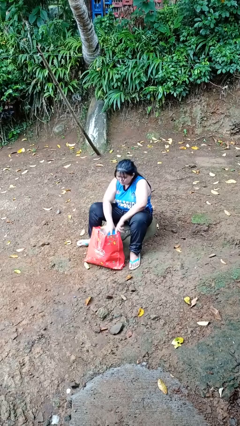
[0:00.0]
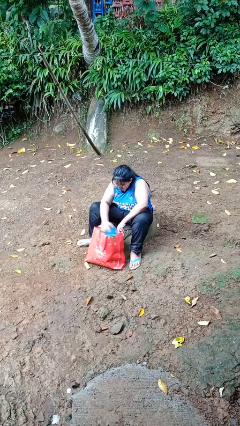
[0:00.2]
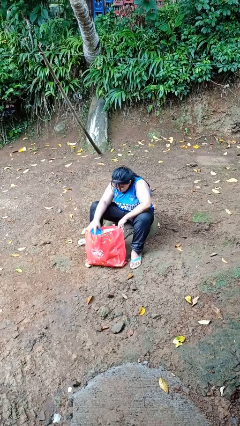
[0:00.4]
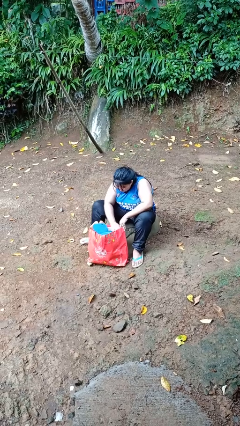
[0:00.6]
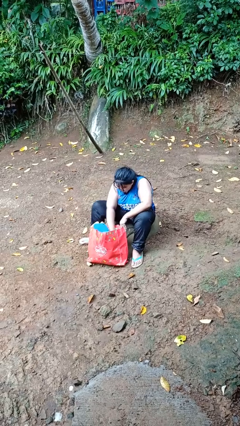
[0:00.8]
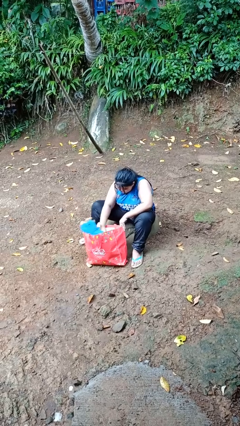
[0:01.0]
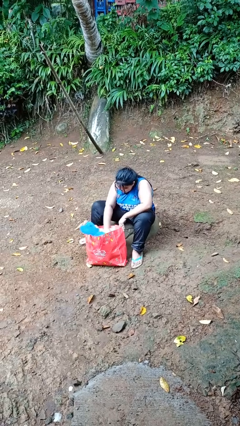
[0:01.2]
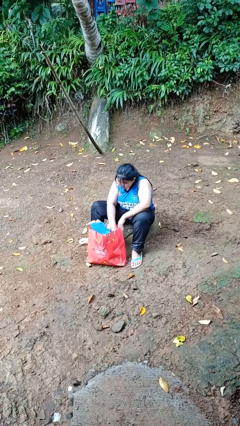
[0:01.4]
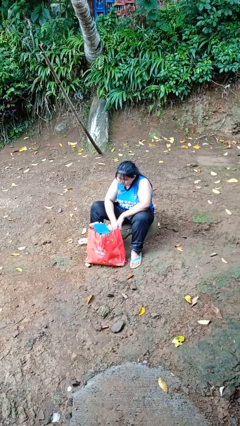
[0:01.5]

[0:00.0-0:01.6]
person searches in bag

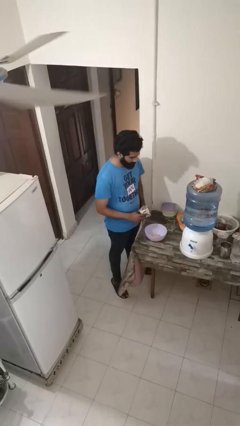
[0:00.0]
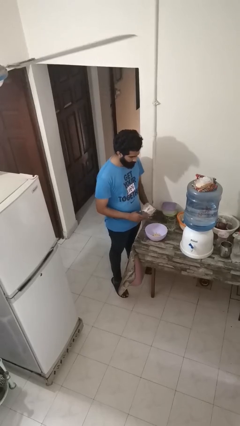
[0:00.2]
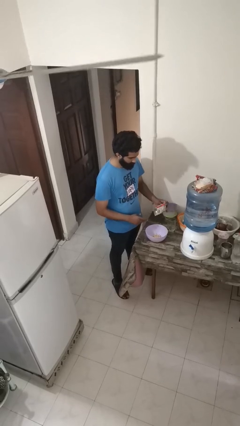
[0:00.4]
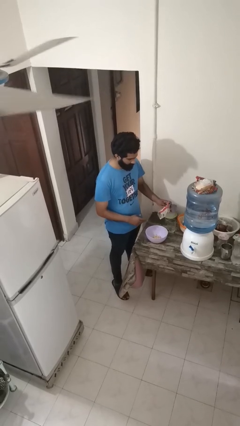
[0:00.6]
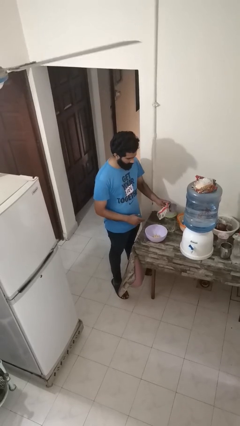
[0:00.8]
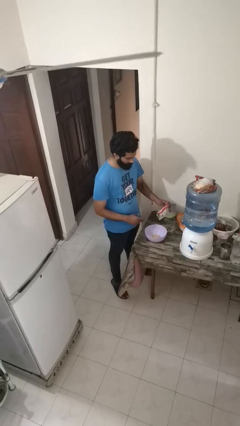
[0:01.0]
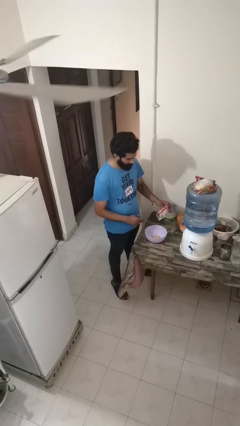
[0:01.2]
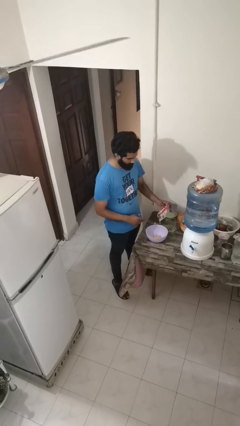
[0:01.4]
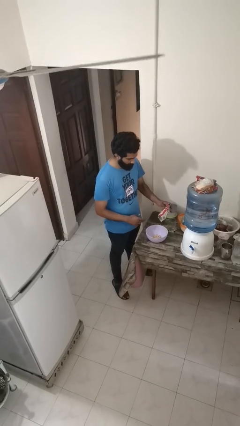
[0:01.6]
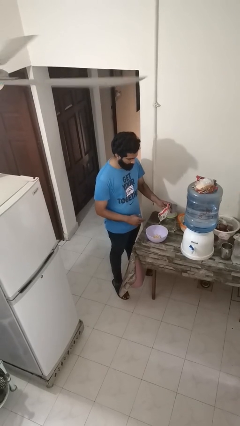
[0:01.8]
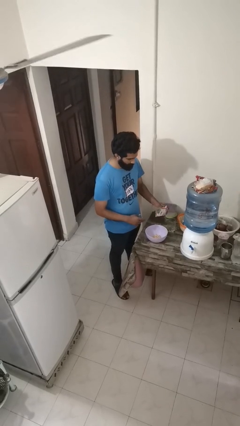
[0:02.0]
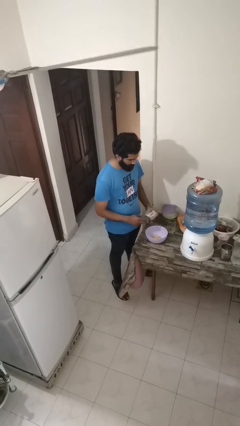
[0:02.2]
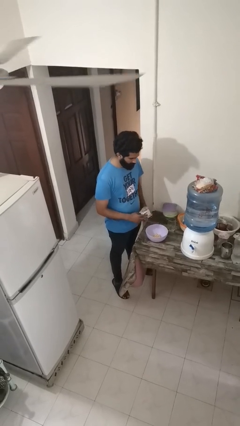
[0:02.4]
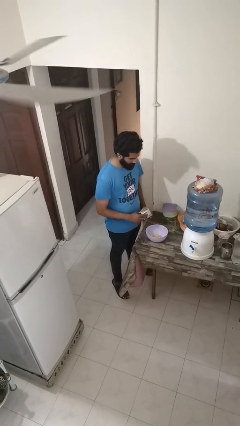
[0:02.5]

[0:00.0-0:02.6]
person pours into bowl

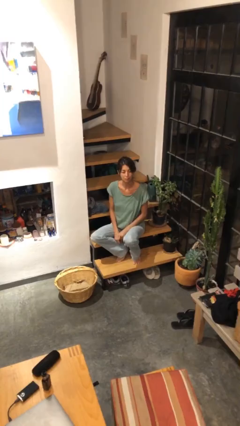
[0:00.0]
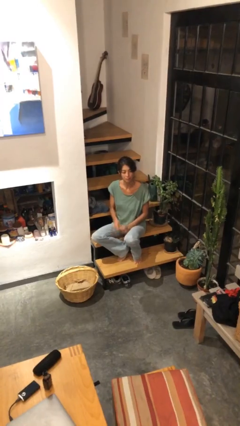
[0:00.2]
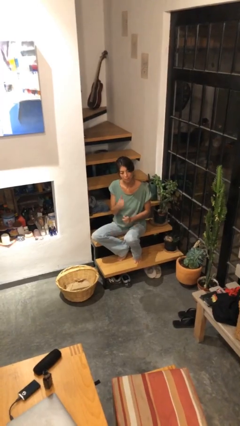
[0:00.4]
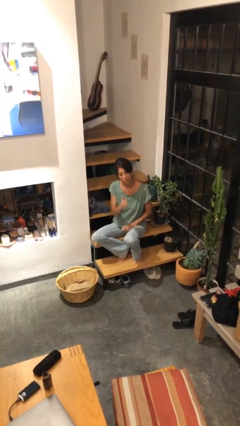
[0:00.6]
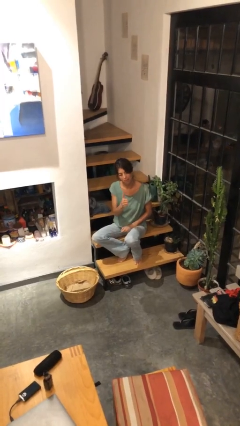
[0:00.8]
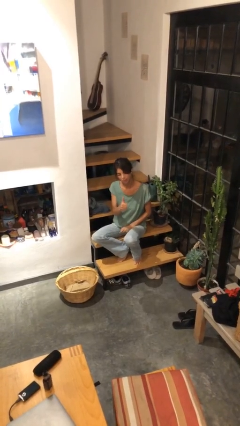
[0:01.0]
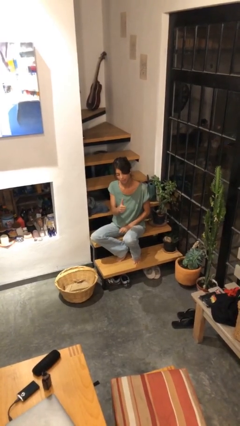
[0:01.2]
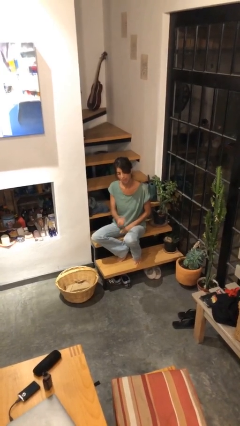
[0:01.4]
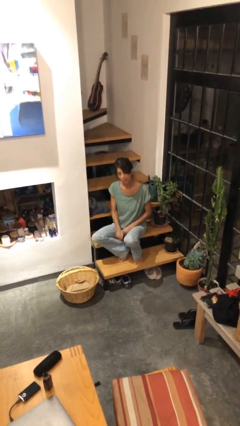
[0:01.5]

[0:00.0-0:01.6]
person gestures thumbs up

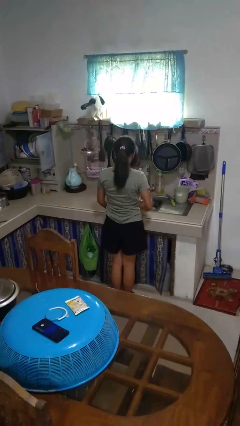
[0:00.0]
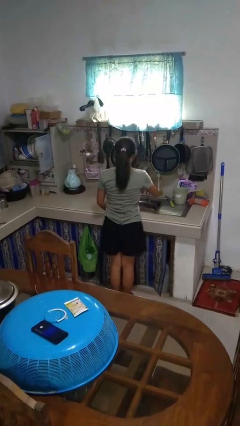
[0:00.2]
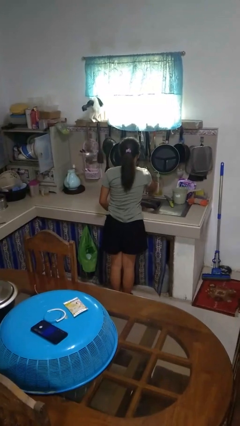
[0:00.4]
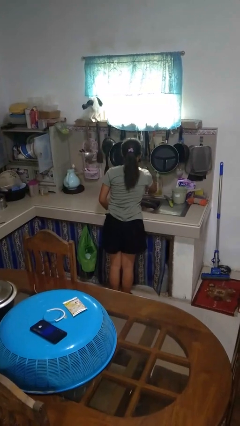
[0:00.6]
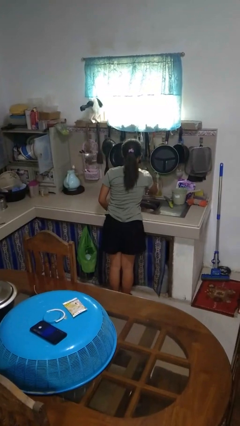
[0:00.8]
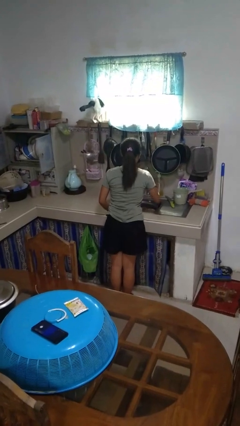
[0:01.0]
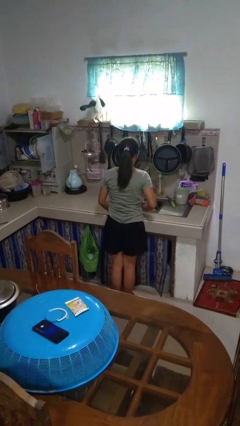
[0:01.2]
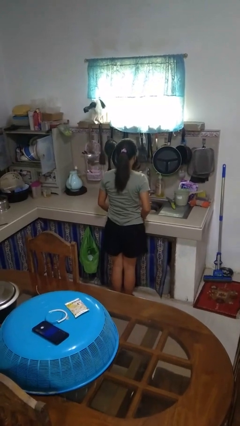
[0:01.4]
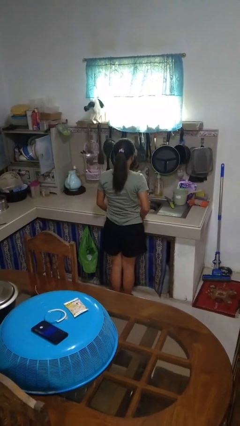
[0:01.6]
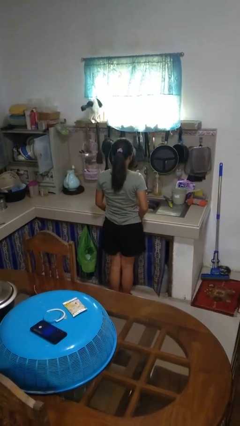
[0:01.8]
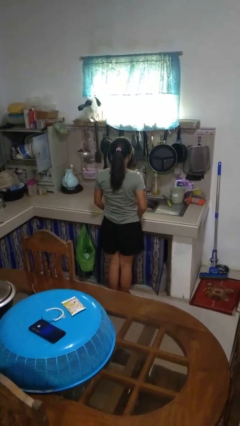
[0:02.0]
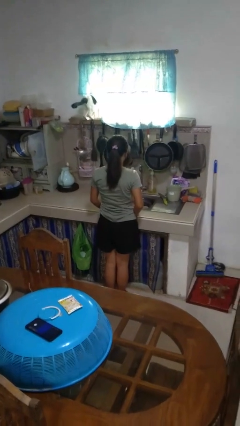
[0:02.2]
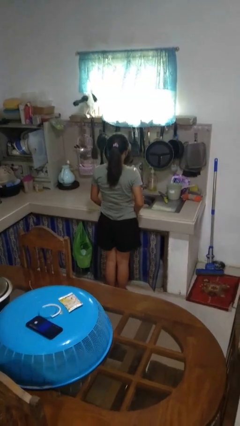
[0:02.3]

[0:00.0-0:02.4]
person turns on faucet

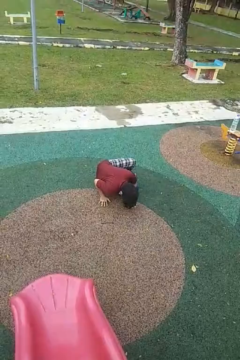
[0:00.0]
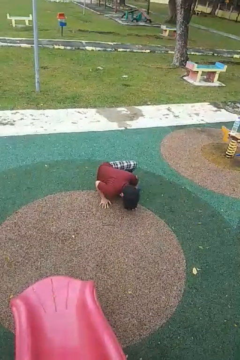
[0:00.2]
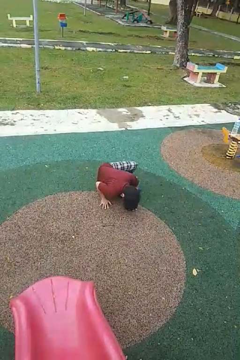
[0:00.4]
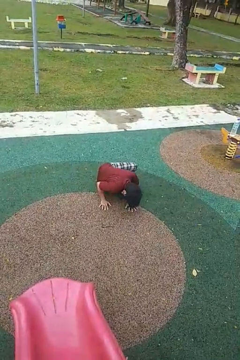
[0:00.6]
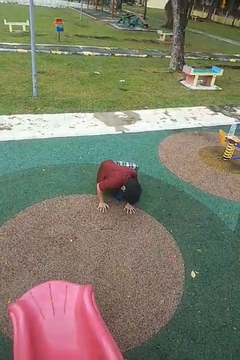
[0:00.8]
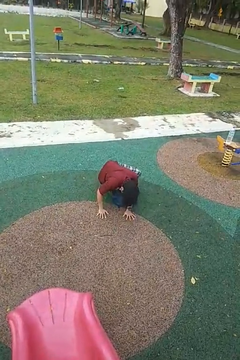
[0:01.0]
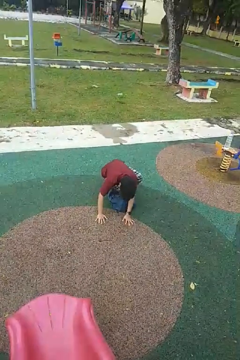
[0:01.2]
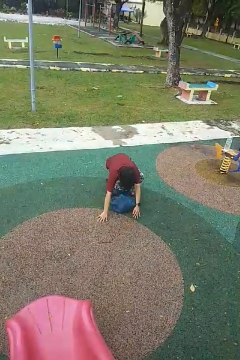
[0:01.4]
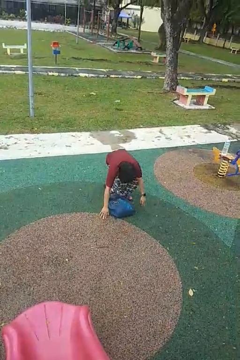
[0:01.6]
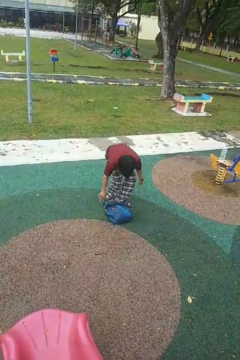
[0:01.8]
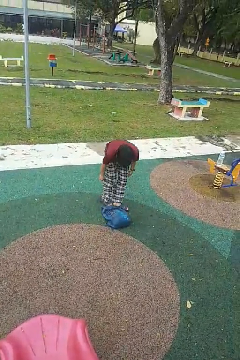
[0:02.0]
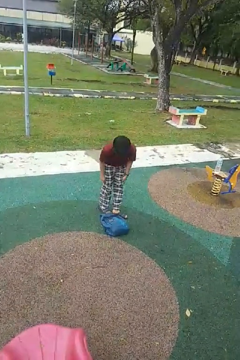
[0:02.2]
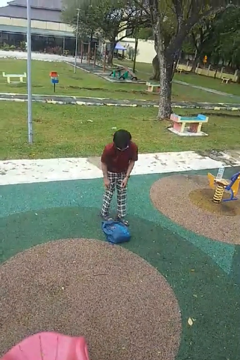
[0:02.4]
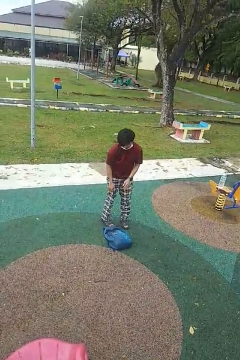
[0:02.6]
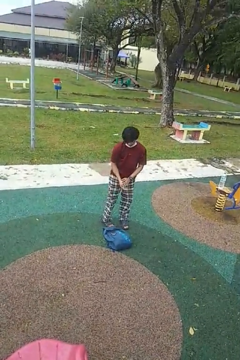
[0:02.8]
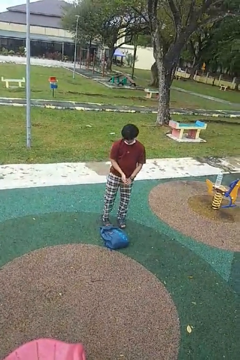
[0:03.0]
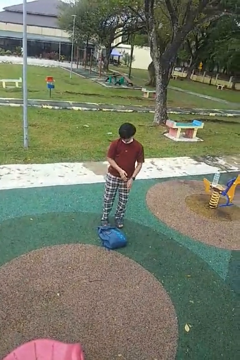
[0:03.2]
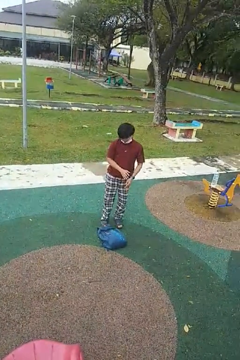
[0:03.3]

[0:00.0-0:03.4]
person stands up from floor

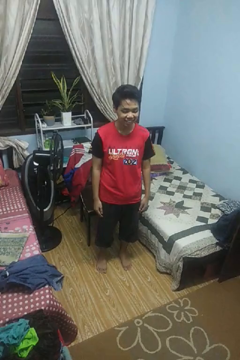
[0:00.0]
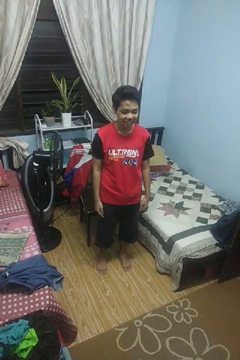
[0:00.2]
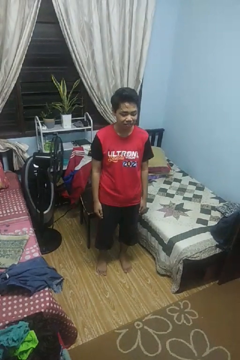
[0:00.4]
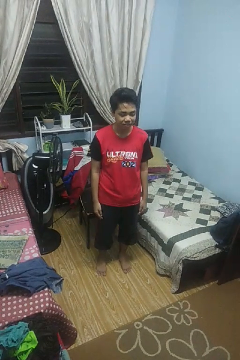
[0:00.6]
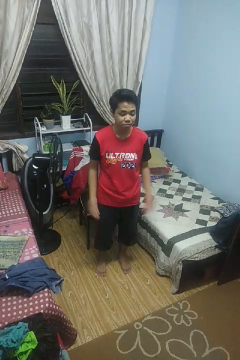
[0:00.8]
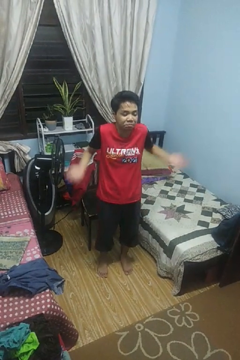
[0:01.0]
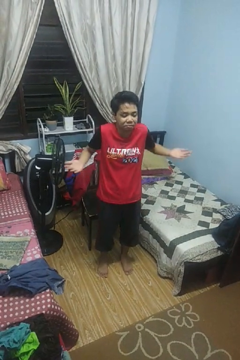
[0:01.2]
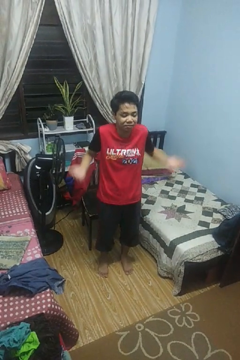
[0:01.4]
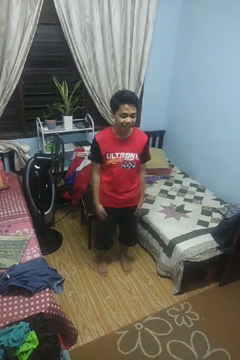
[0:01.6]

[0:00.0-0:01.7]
person shrugs

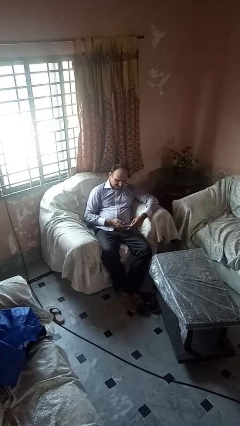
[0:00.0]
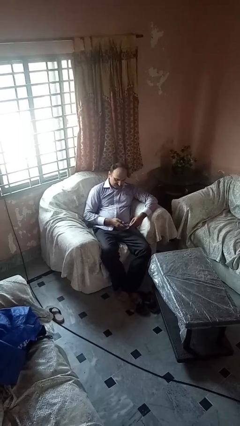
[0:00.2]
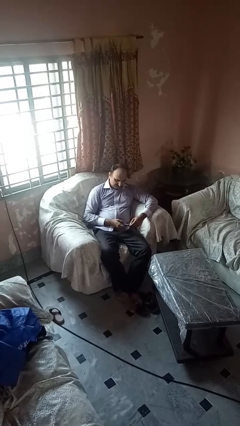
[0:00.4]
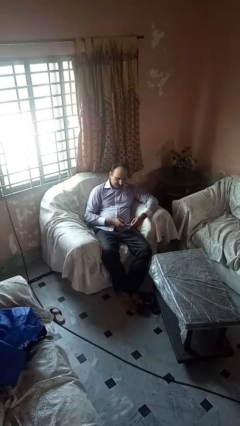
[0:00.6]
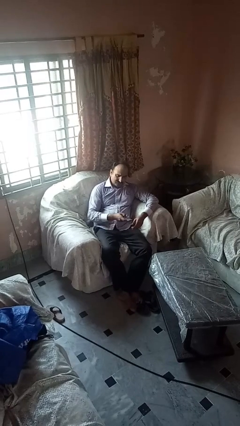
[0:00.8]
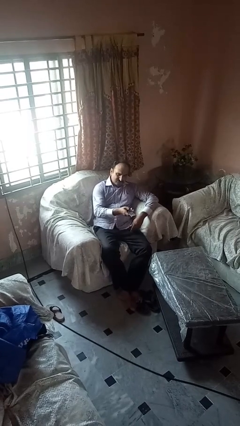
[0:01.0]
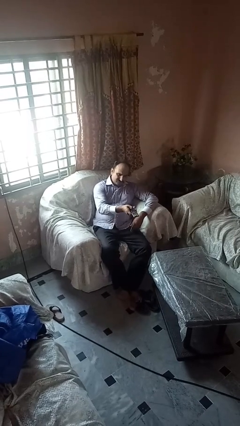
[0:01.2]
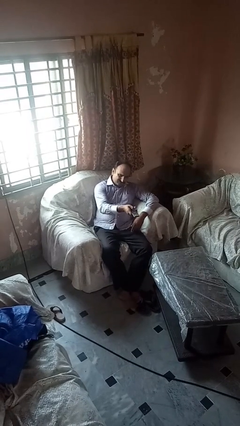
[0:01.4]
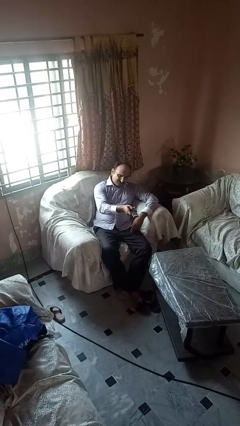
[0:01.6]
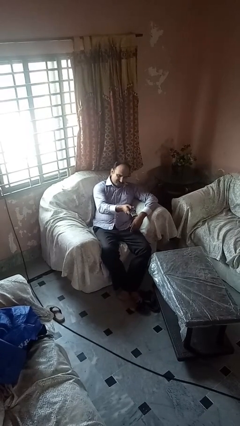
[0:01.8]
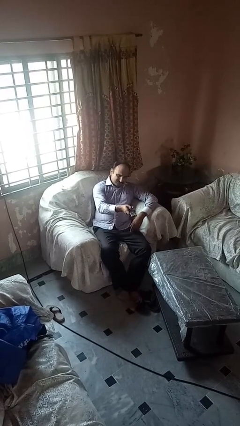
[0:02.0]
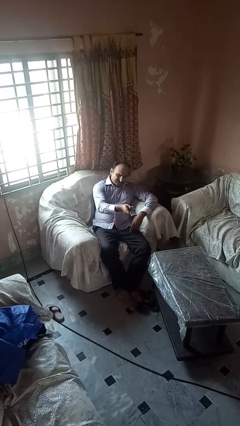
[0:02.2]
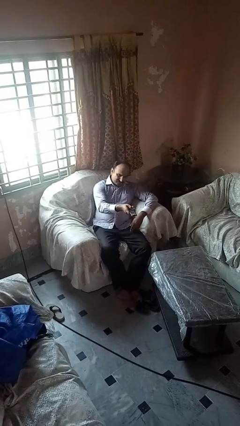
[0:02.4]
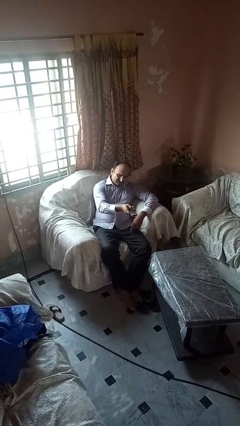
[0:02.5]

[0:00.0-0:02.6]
person uses television remote

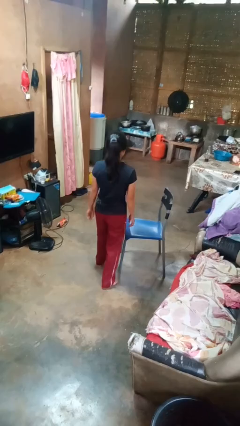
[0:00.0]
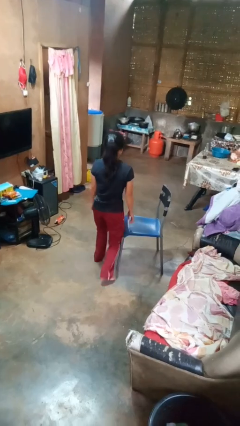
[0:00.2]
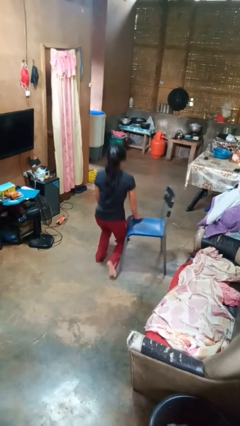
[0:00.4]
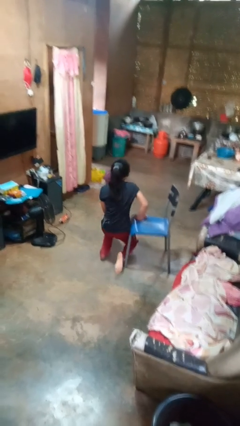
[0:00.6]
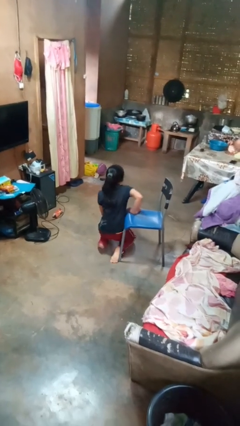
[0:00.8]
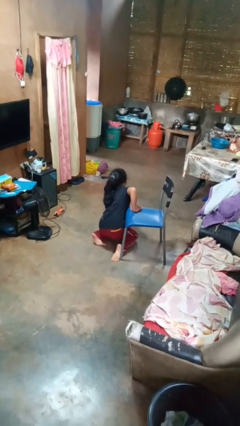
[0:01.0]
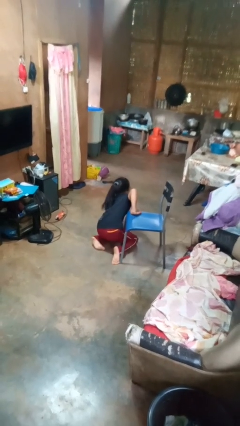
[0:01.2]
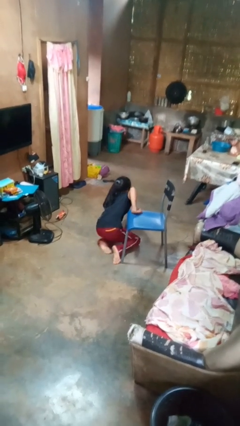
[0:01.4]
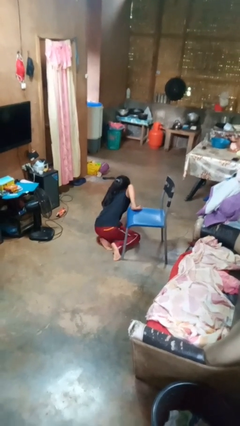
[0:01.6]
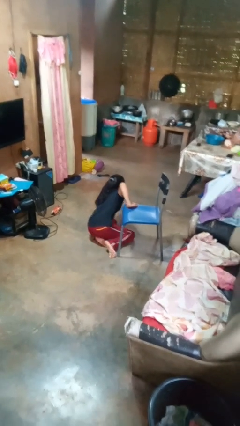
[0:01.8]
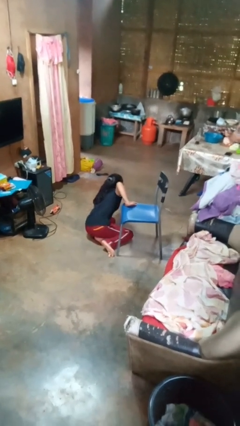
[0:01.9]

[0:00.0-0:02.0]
person trips on object on floor
